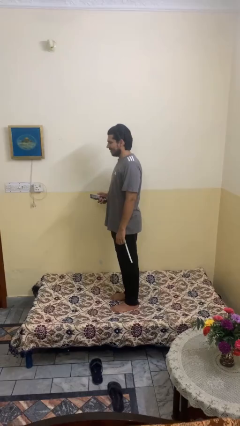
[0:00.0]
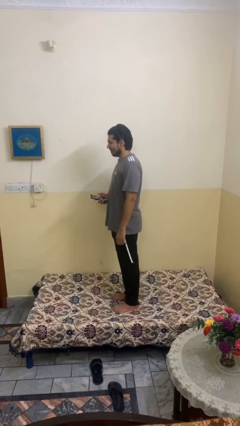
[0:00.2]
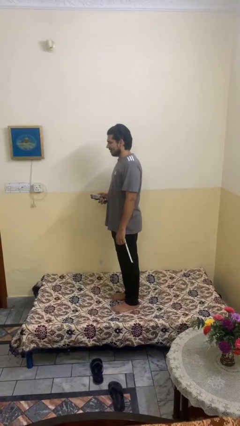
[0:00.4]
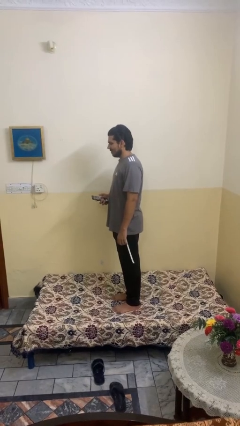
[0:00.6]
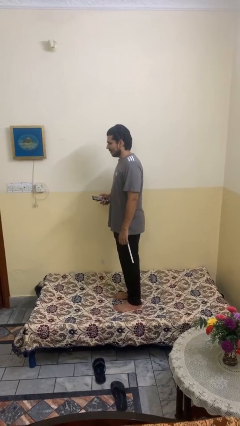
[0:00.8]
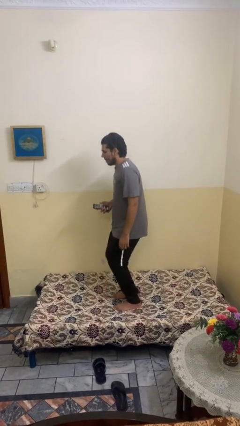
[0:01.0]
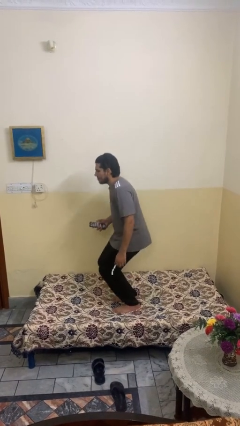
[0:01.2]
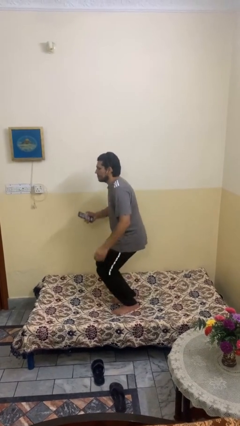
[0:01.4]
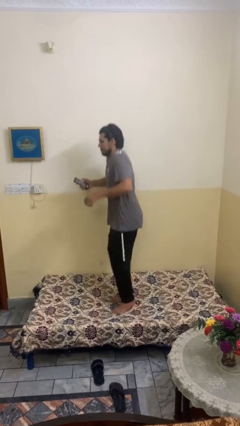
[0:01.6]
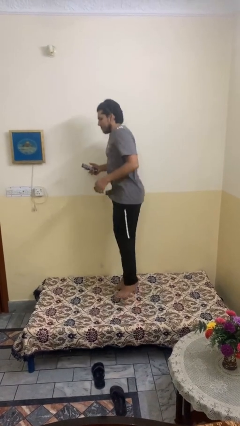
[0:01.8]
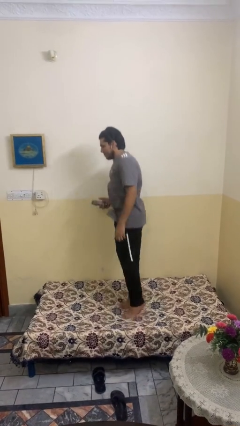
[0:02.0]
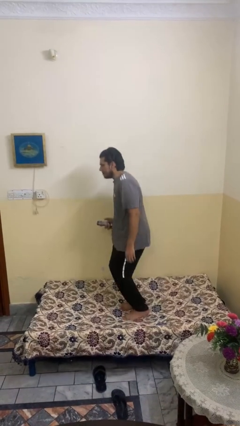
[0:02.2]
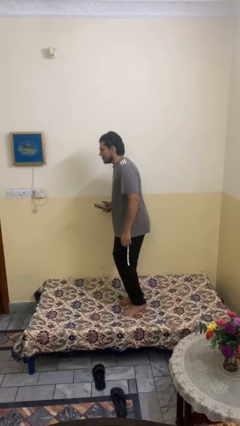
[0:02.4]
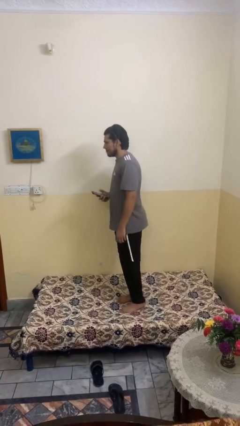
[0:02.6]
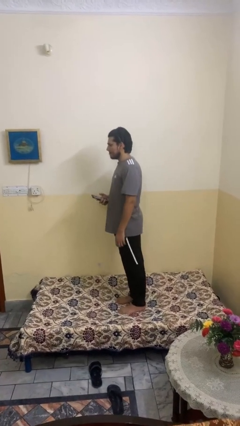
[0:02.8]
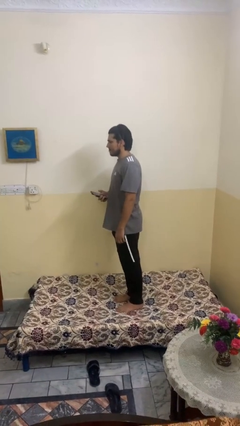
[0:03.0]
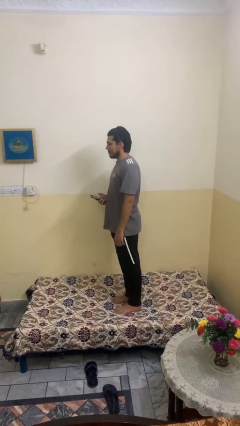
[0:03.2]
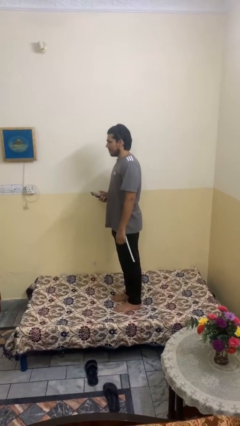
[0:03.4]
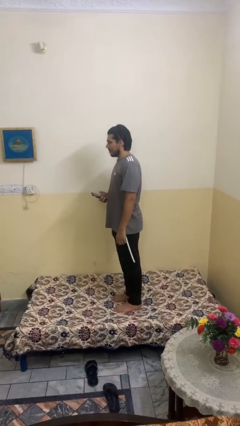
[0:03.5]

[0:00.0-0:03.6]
person jumps on couch

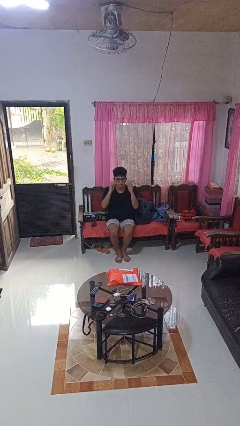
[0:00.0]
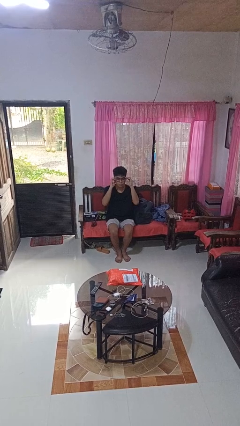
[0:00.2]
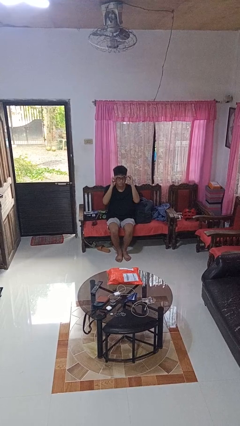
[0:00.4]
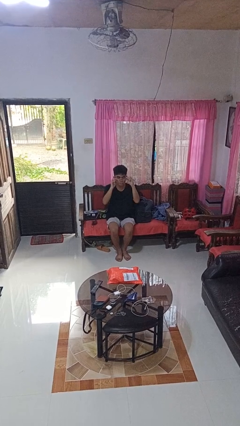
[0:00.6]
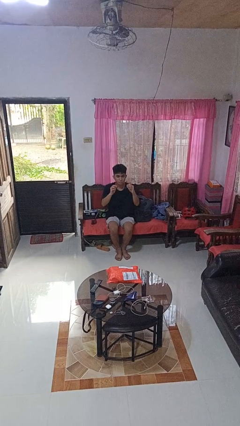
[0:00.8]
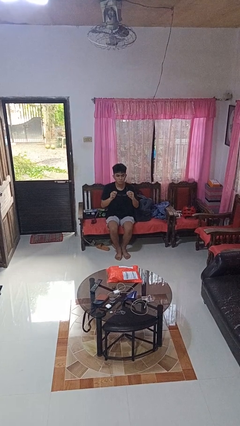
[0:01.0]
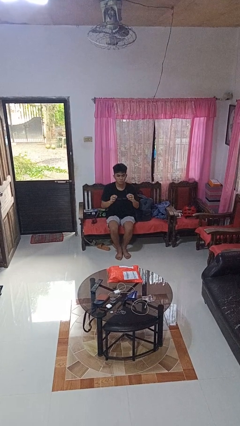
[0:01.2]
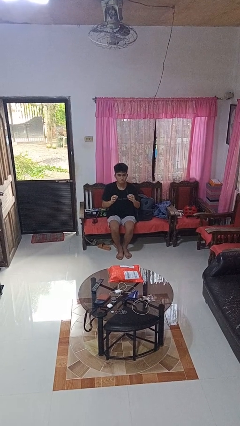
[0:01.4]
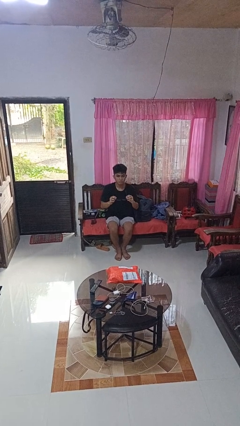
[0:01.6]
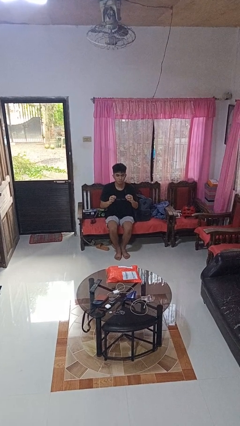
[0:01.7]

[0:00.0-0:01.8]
person takes off glasses

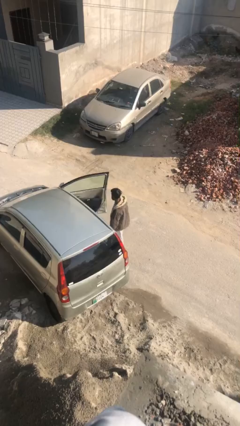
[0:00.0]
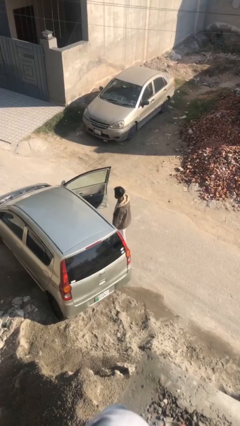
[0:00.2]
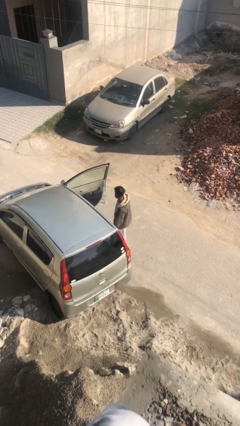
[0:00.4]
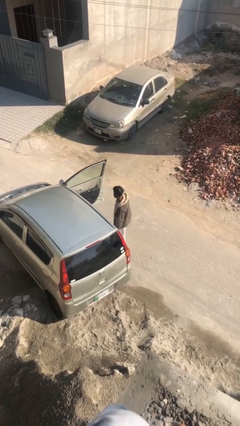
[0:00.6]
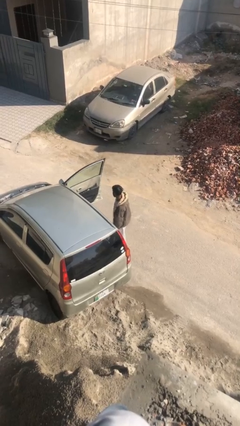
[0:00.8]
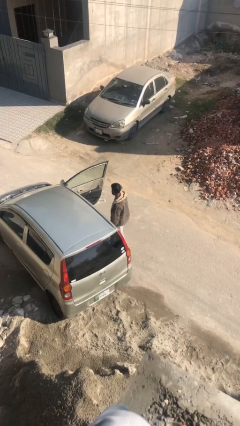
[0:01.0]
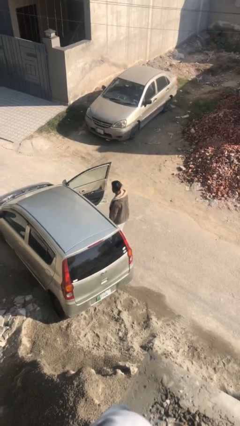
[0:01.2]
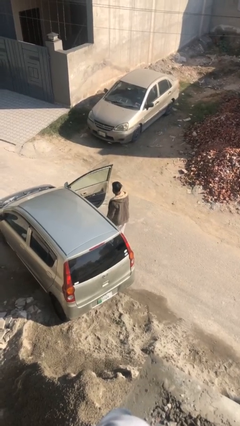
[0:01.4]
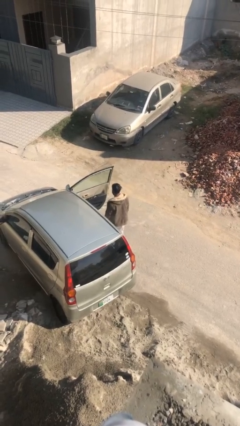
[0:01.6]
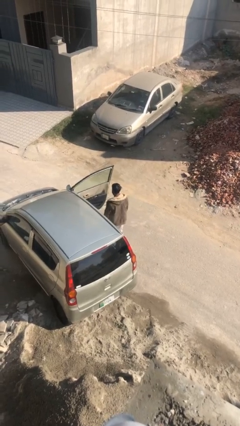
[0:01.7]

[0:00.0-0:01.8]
person opens car door

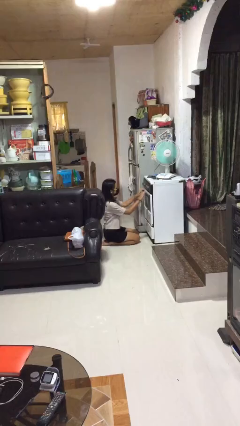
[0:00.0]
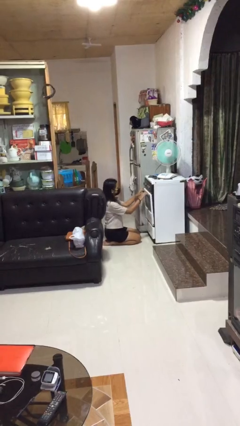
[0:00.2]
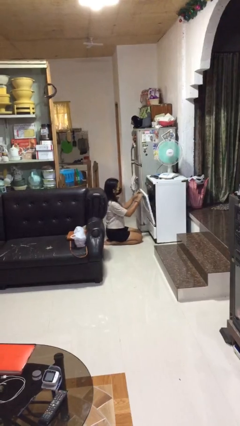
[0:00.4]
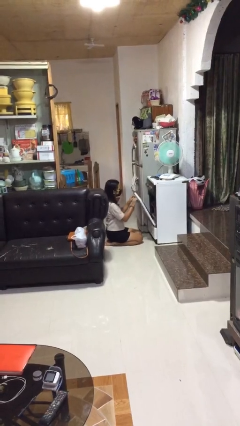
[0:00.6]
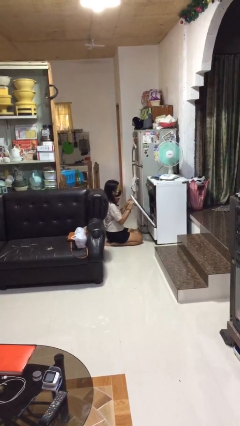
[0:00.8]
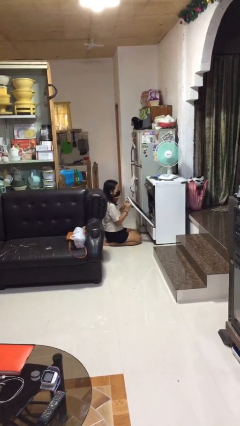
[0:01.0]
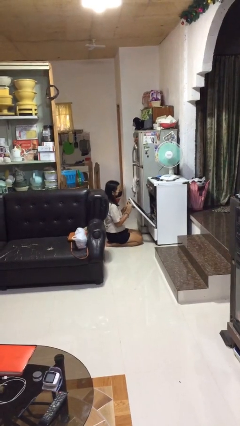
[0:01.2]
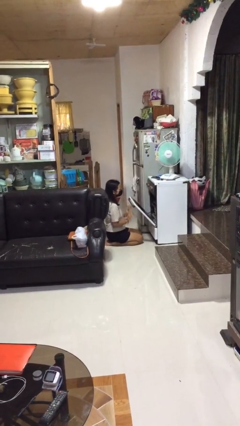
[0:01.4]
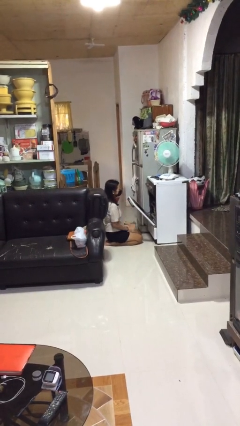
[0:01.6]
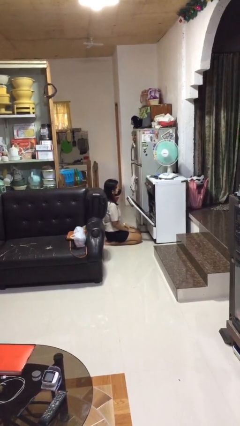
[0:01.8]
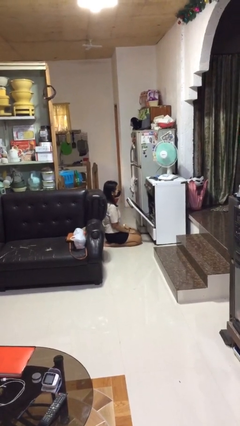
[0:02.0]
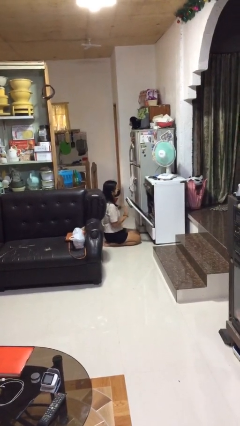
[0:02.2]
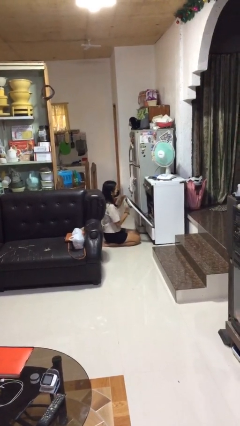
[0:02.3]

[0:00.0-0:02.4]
person opens oven door

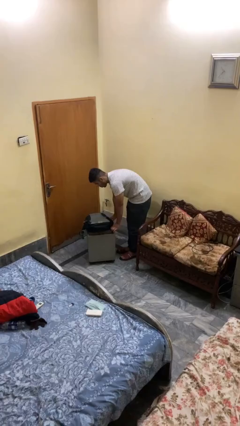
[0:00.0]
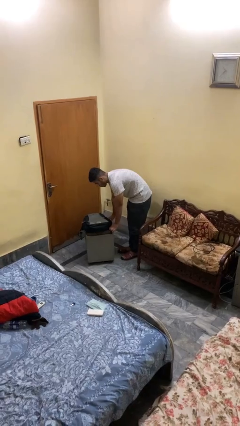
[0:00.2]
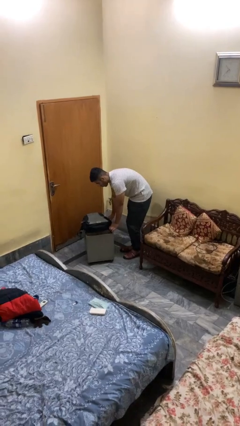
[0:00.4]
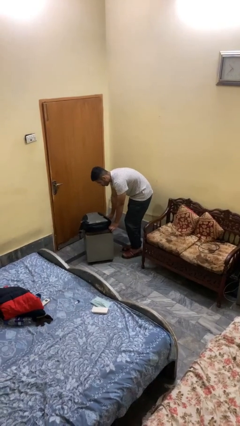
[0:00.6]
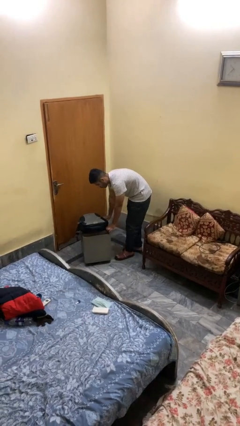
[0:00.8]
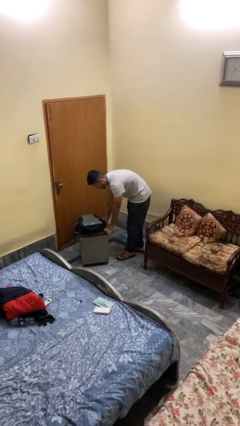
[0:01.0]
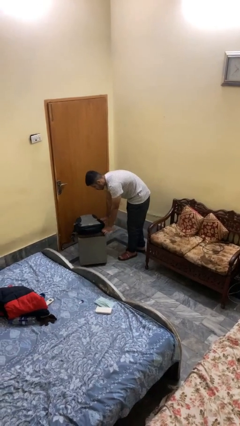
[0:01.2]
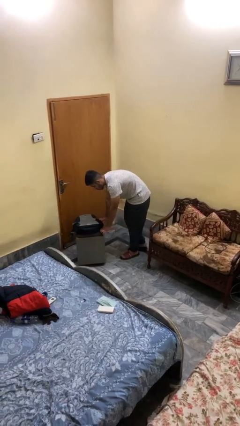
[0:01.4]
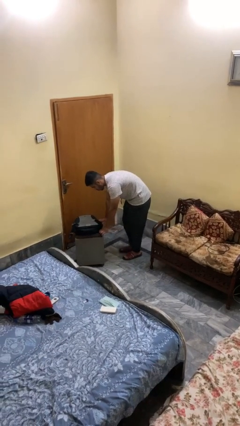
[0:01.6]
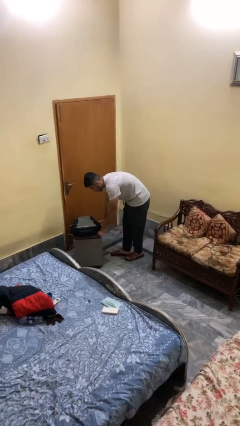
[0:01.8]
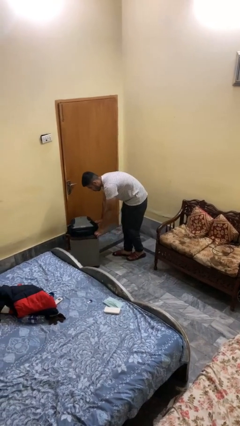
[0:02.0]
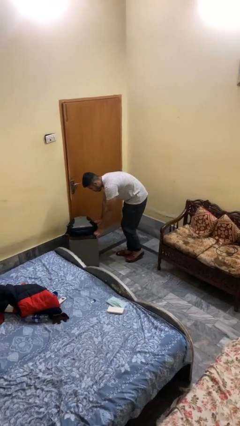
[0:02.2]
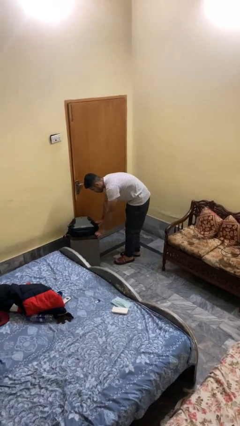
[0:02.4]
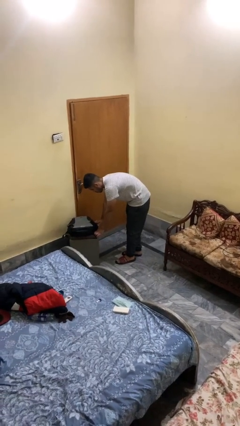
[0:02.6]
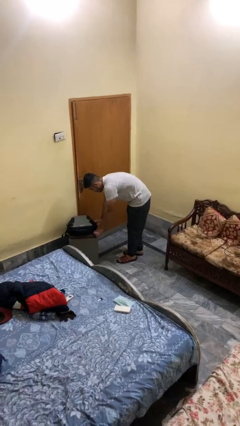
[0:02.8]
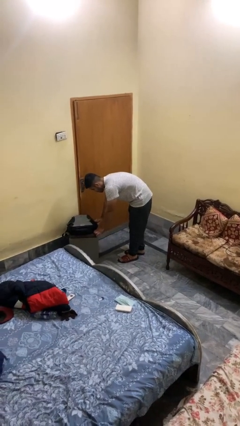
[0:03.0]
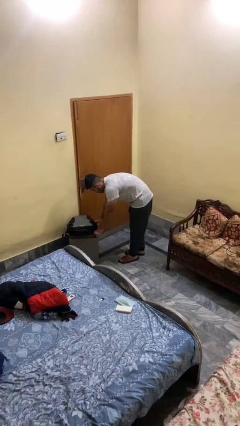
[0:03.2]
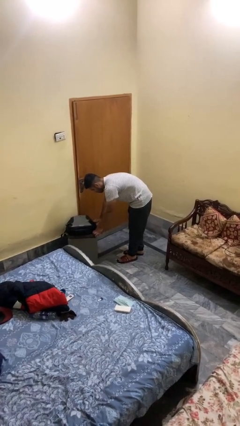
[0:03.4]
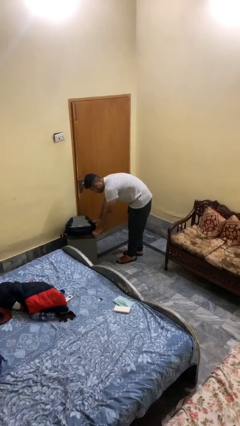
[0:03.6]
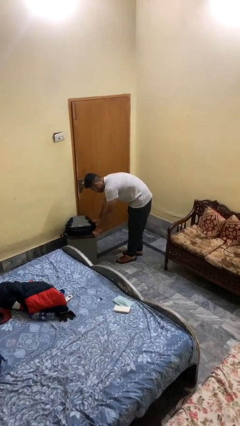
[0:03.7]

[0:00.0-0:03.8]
person pushes wheeled cart

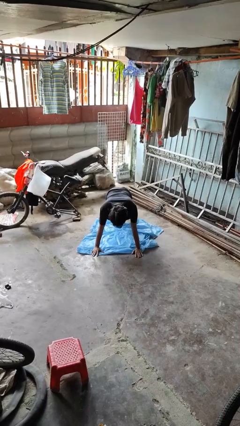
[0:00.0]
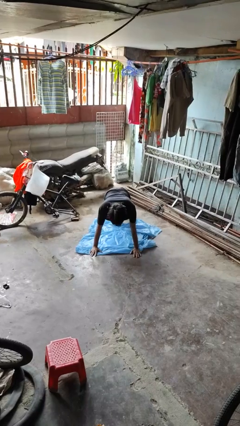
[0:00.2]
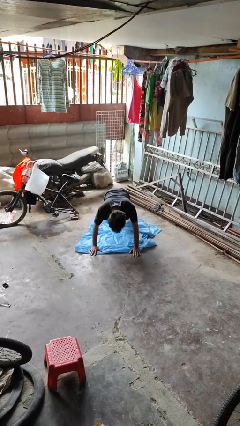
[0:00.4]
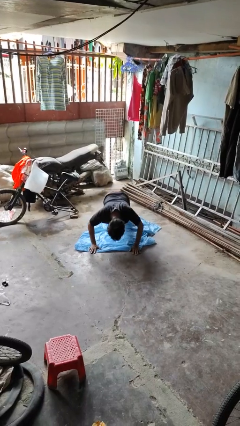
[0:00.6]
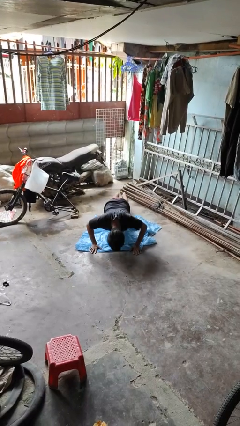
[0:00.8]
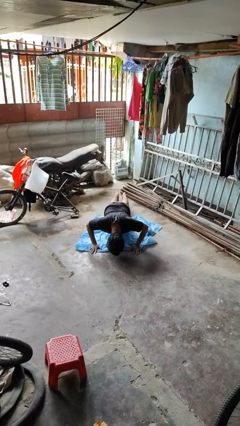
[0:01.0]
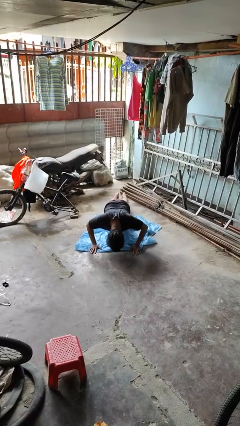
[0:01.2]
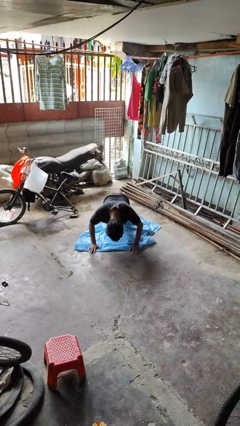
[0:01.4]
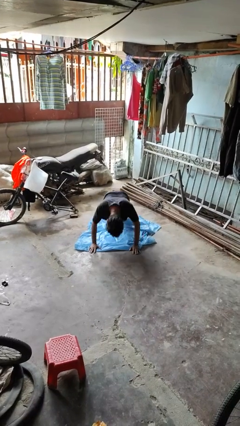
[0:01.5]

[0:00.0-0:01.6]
person exercises with pushup

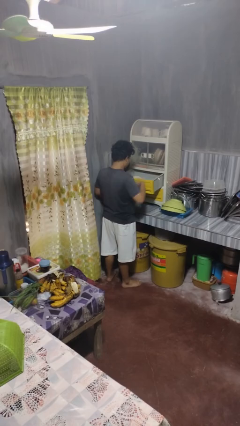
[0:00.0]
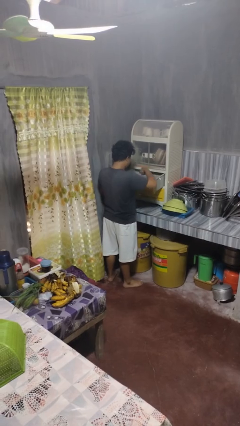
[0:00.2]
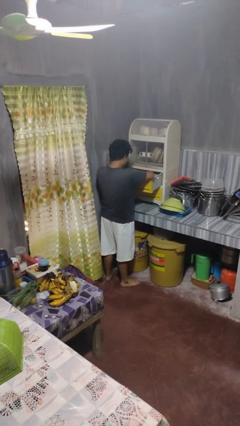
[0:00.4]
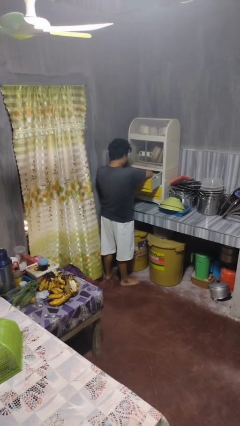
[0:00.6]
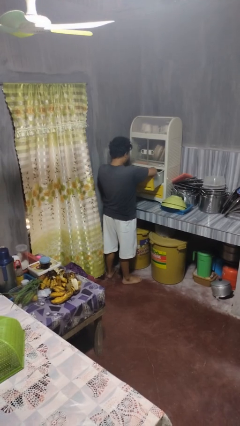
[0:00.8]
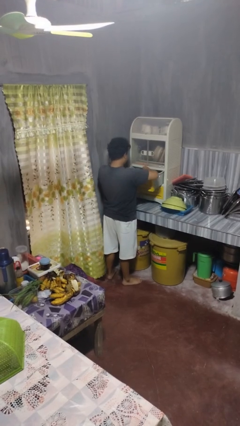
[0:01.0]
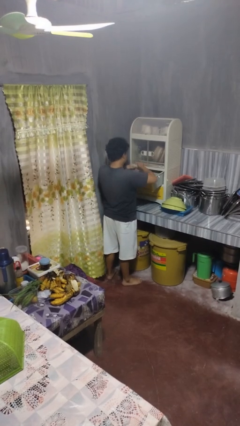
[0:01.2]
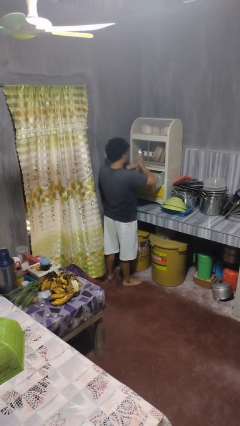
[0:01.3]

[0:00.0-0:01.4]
person takes object from kitchen drawer

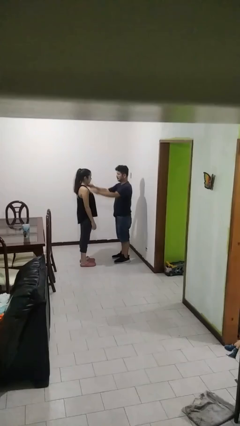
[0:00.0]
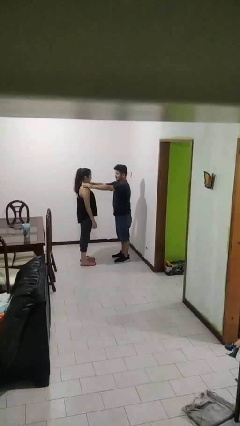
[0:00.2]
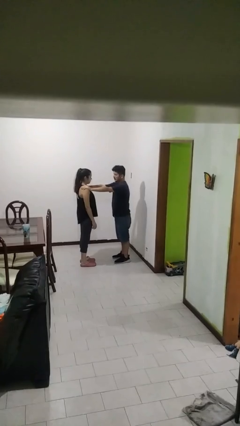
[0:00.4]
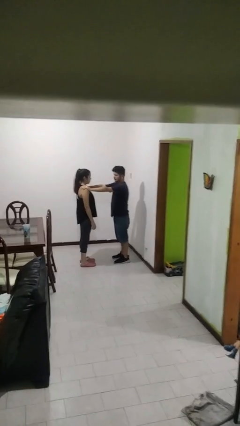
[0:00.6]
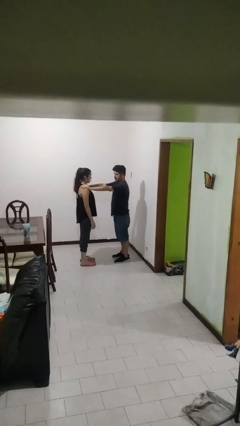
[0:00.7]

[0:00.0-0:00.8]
person grabs person by shoulder
